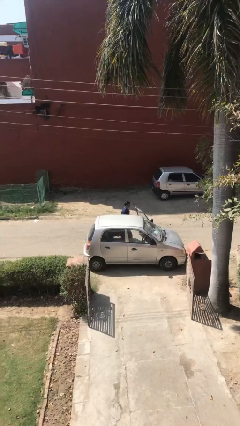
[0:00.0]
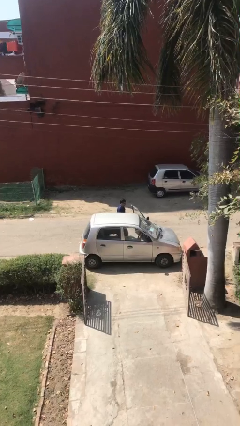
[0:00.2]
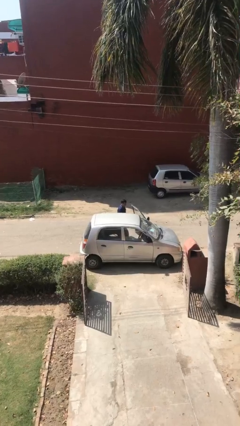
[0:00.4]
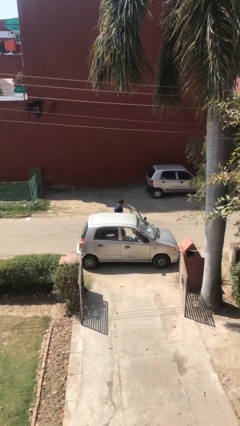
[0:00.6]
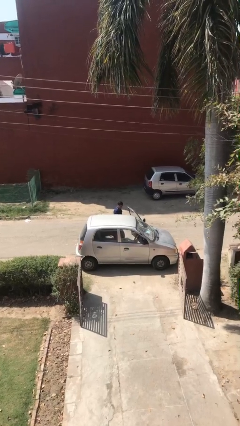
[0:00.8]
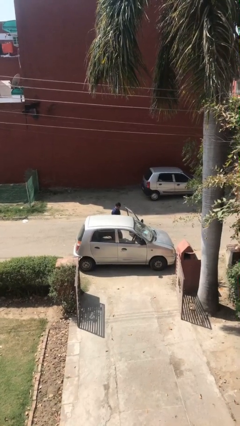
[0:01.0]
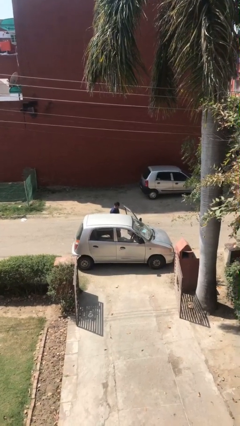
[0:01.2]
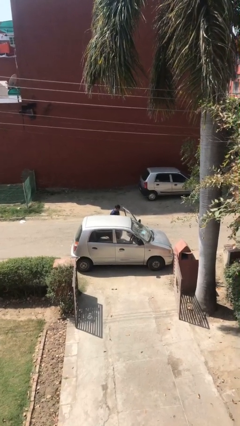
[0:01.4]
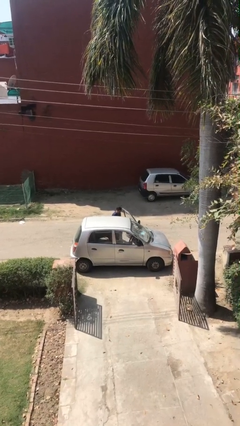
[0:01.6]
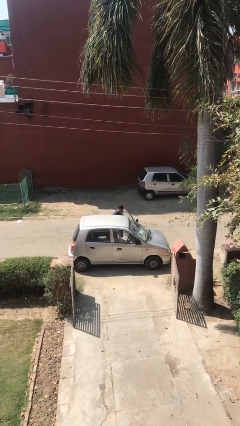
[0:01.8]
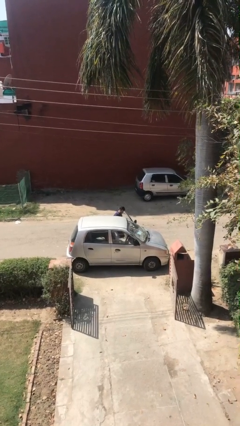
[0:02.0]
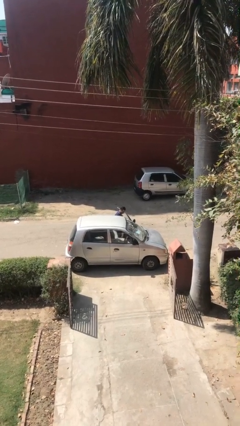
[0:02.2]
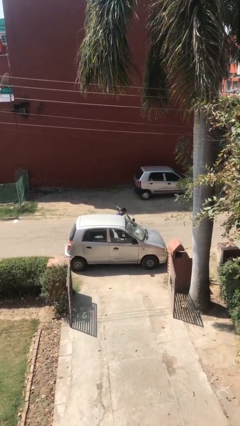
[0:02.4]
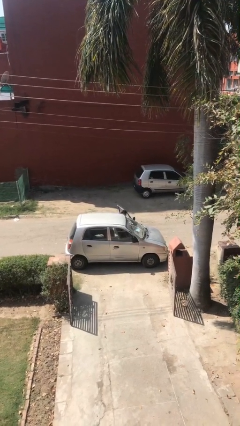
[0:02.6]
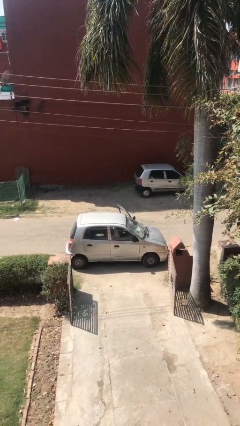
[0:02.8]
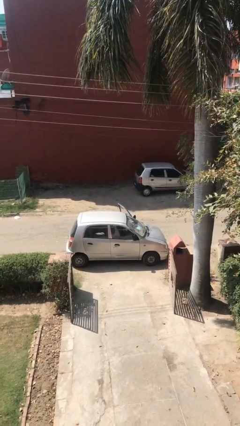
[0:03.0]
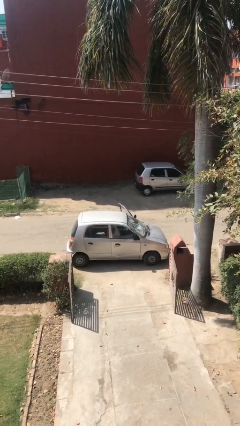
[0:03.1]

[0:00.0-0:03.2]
person enters car

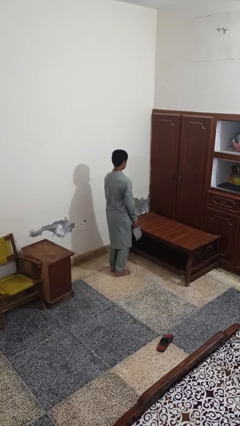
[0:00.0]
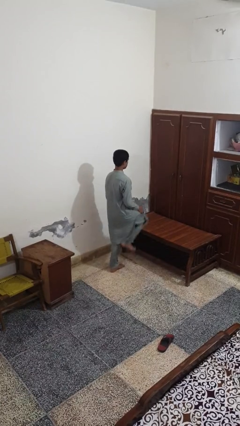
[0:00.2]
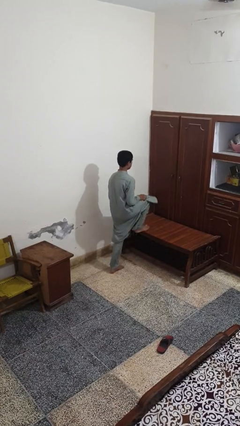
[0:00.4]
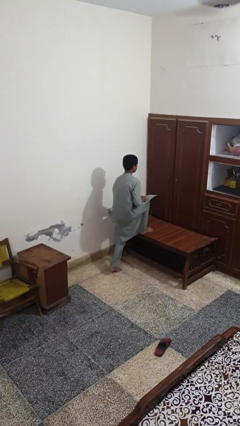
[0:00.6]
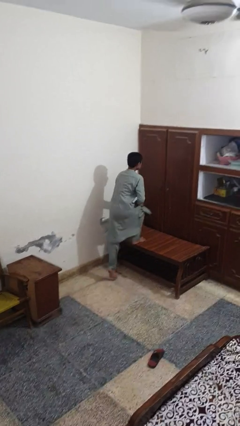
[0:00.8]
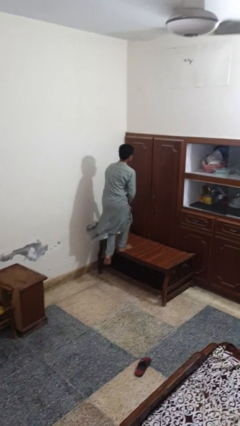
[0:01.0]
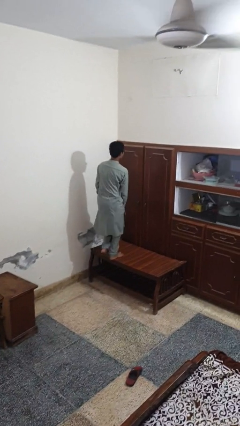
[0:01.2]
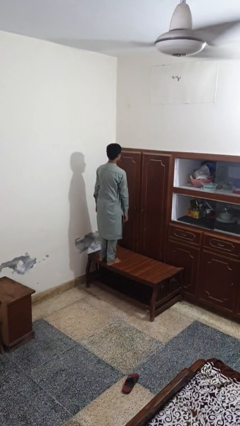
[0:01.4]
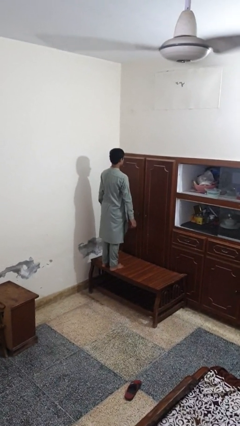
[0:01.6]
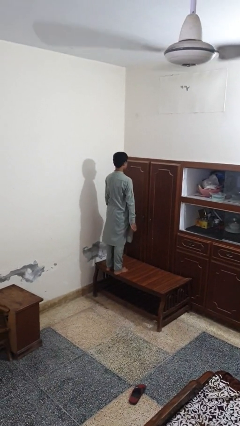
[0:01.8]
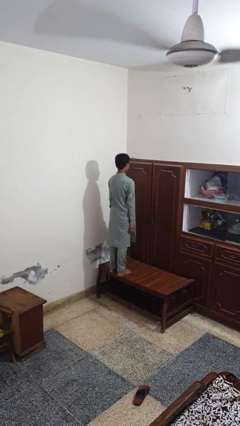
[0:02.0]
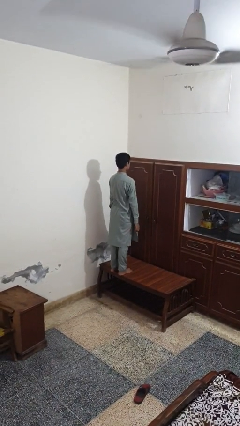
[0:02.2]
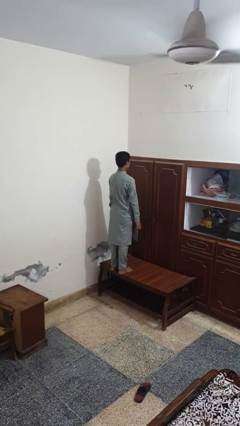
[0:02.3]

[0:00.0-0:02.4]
person climbs on table

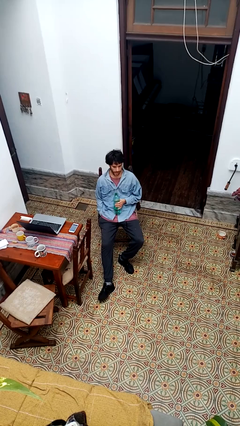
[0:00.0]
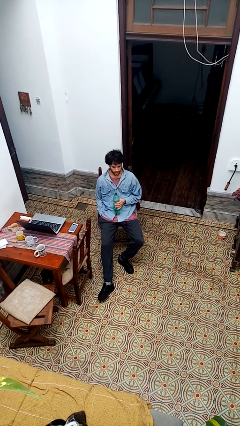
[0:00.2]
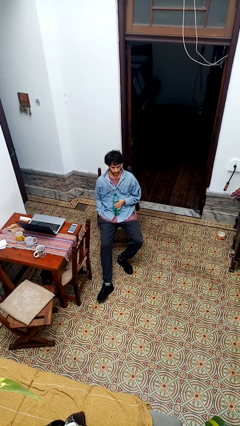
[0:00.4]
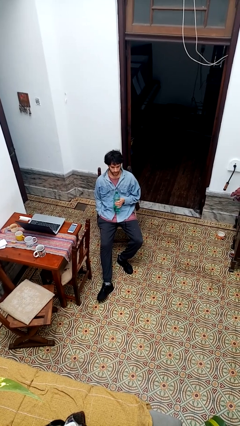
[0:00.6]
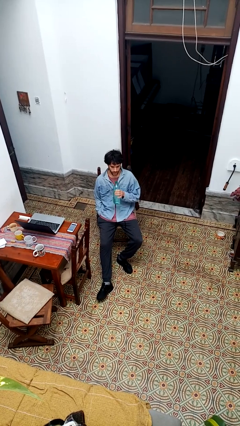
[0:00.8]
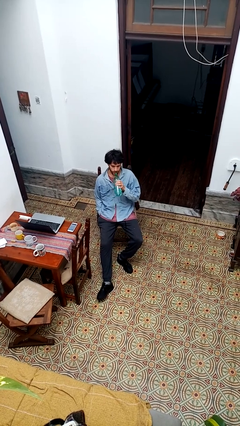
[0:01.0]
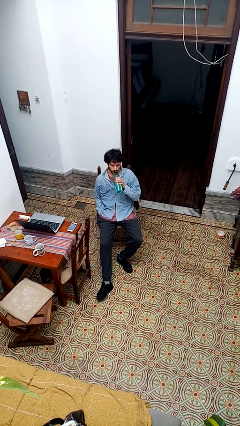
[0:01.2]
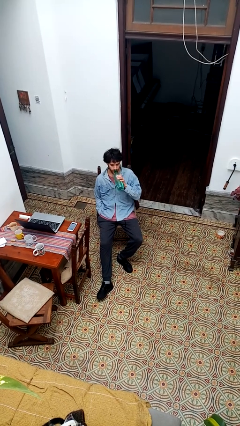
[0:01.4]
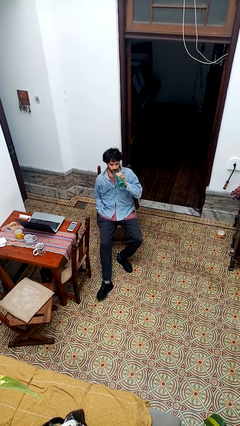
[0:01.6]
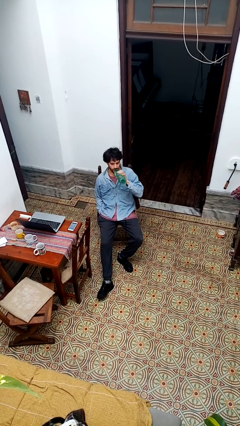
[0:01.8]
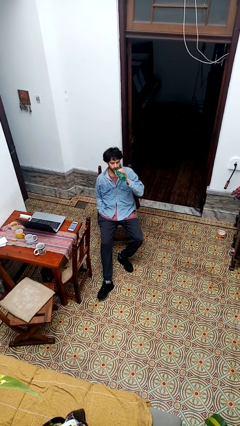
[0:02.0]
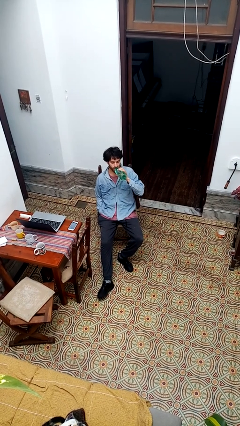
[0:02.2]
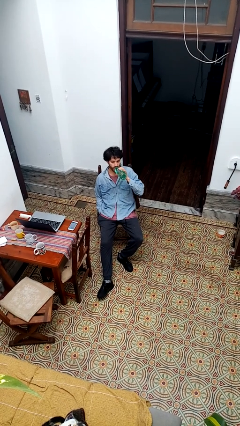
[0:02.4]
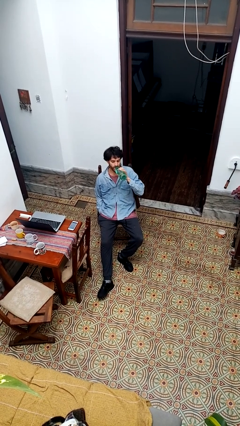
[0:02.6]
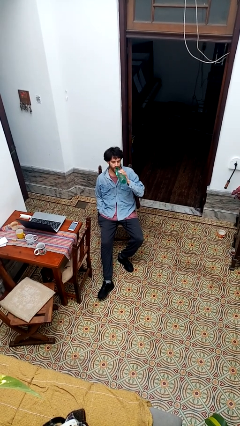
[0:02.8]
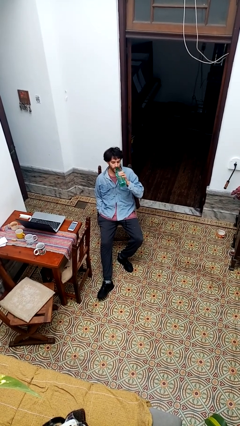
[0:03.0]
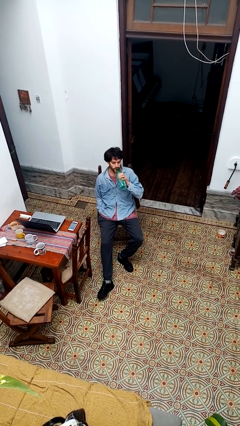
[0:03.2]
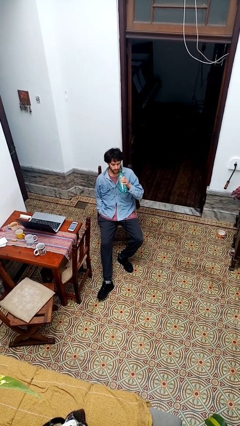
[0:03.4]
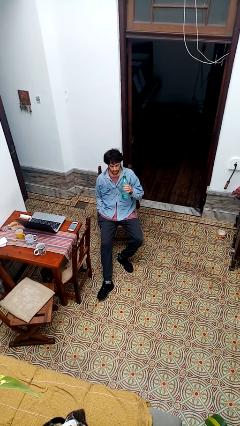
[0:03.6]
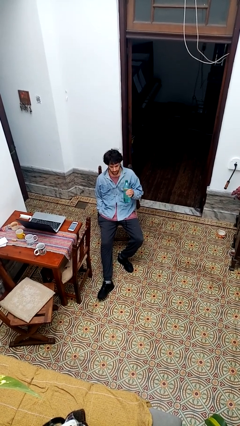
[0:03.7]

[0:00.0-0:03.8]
person drinks from bottle

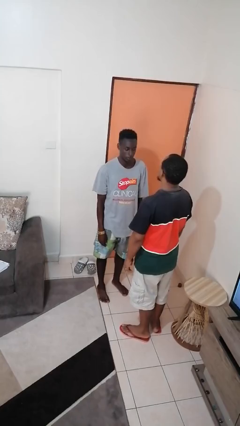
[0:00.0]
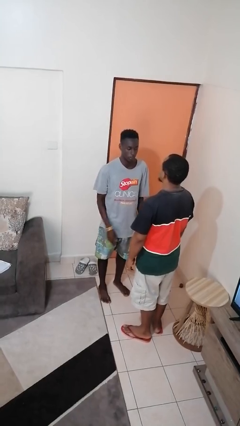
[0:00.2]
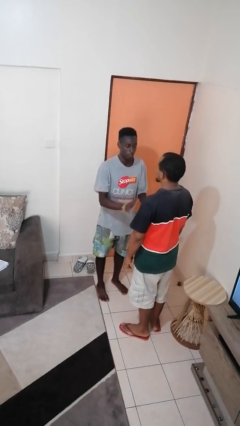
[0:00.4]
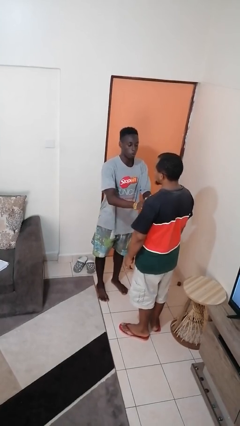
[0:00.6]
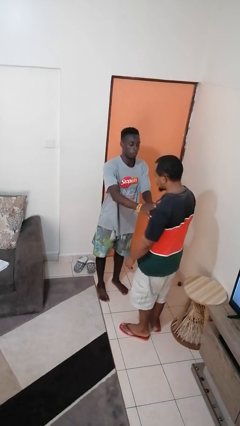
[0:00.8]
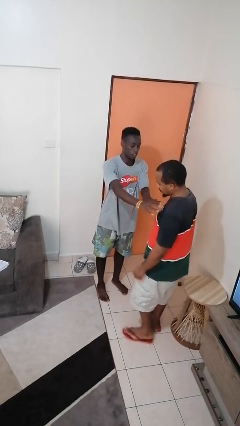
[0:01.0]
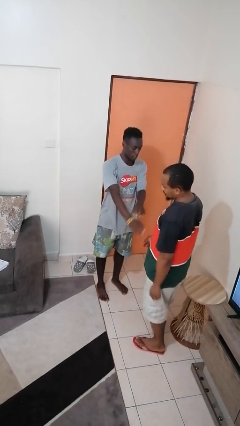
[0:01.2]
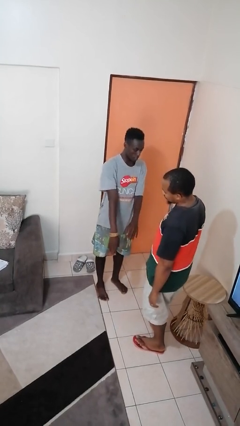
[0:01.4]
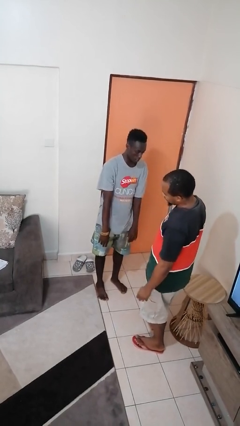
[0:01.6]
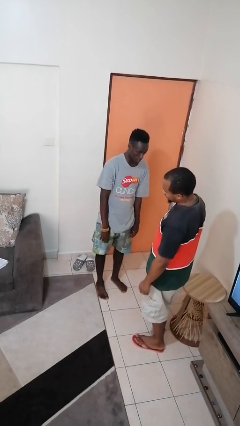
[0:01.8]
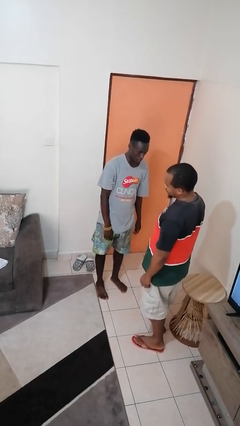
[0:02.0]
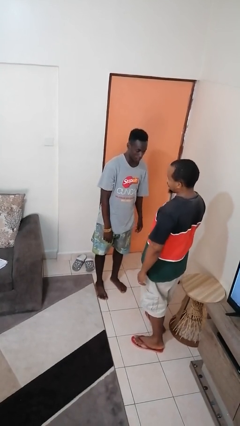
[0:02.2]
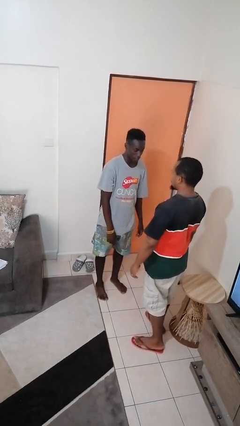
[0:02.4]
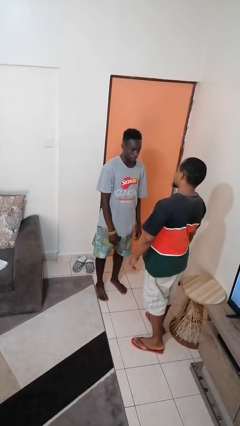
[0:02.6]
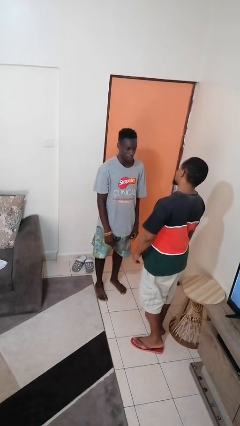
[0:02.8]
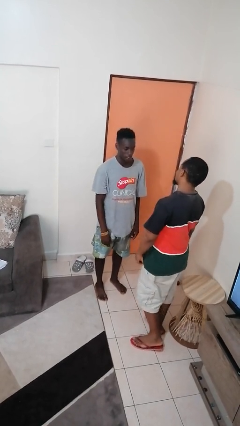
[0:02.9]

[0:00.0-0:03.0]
person shoves person

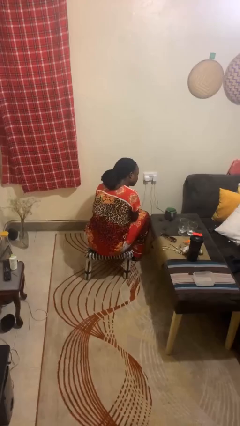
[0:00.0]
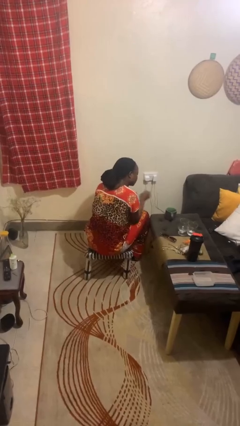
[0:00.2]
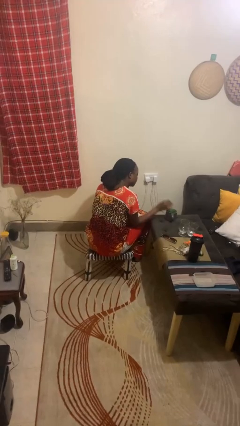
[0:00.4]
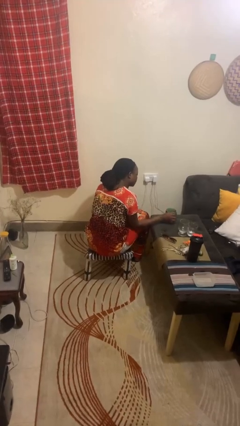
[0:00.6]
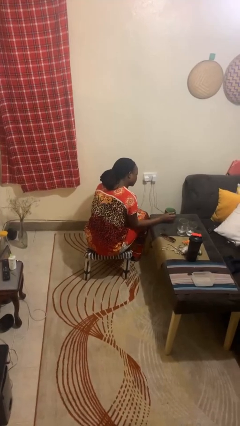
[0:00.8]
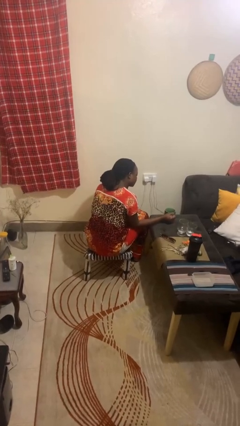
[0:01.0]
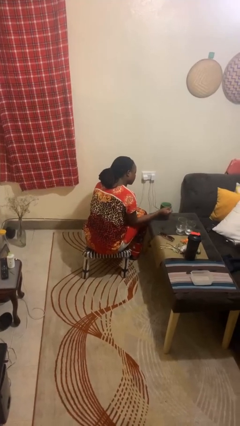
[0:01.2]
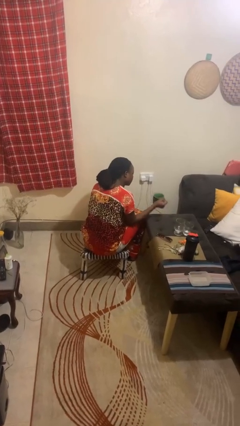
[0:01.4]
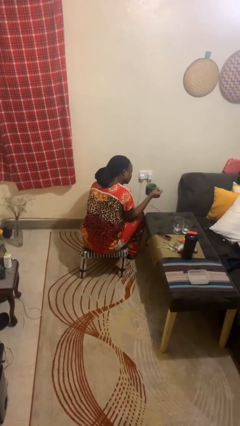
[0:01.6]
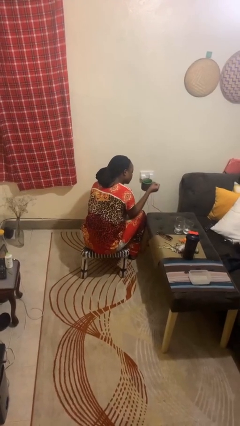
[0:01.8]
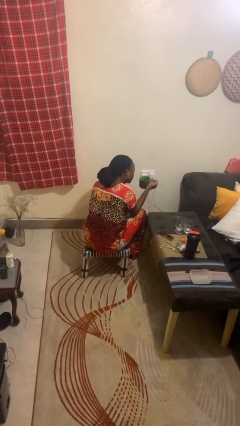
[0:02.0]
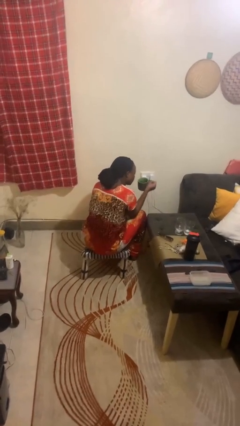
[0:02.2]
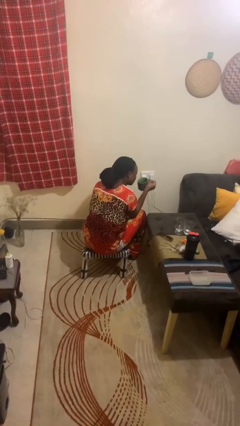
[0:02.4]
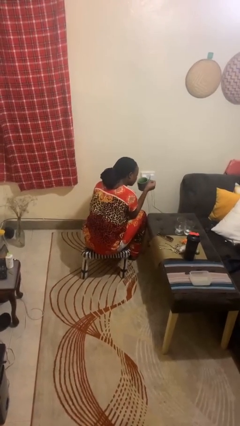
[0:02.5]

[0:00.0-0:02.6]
person picks up object from table

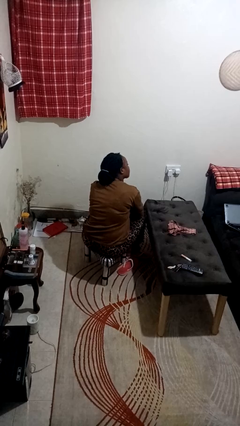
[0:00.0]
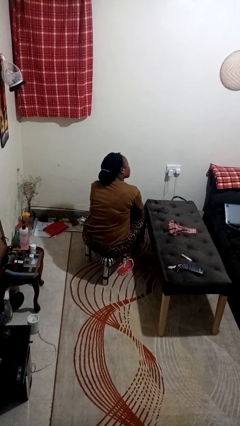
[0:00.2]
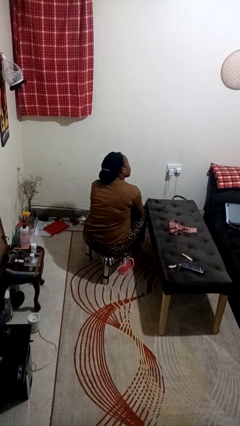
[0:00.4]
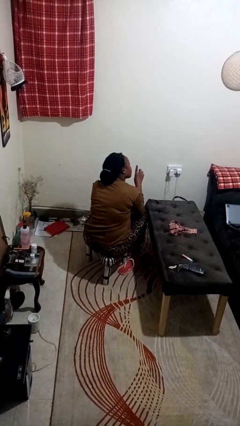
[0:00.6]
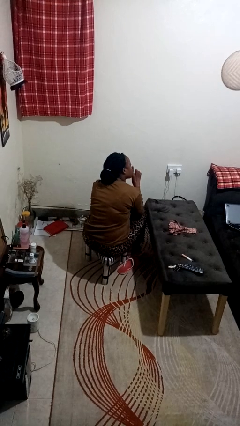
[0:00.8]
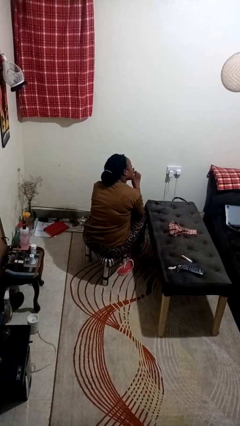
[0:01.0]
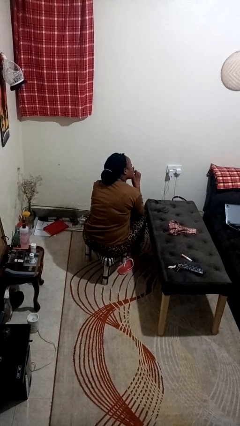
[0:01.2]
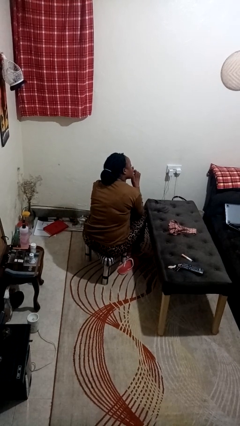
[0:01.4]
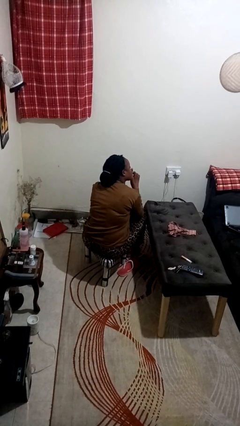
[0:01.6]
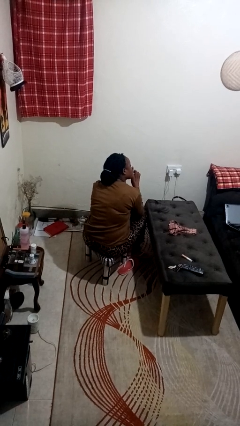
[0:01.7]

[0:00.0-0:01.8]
person gestures be quiet

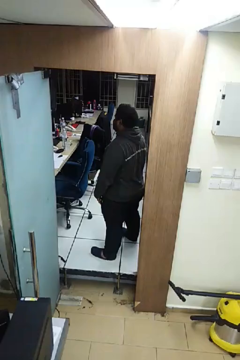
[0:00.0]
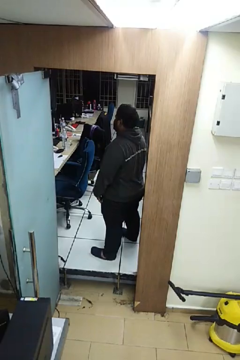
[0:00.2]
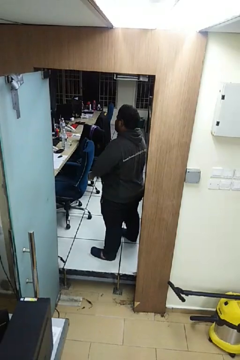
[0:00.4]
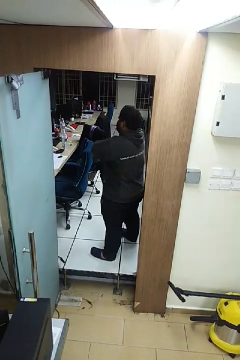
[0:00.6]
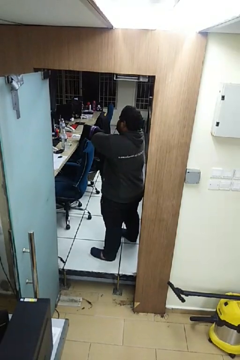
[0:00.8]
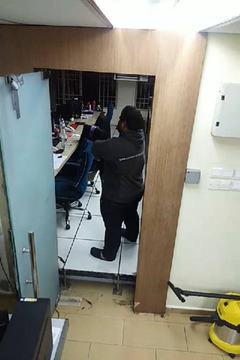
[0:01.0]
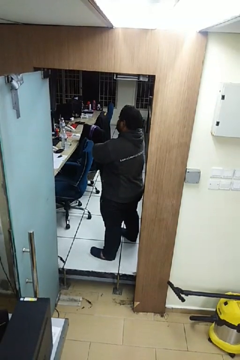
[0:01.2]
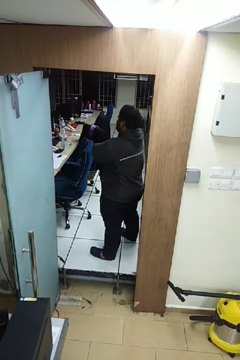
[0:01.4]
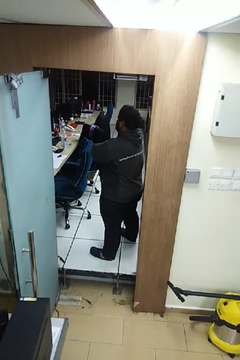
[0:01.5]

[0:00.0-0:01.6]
person crosses arms
